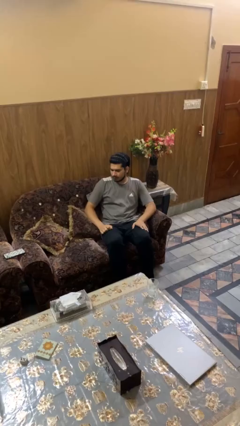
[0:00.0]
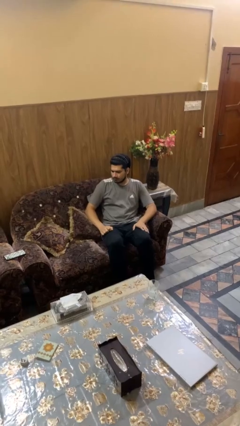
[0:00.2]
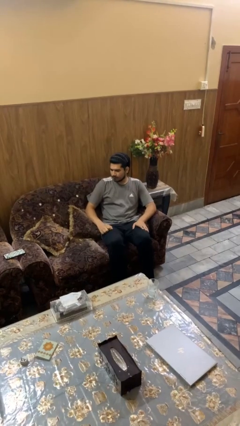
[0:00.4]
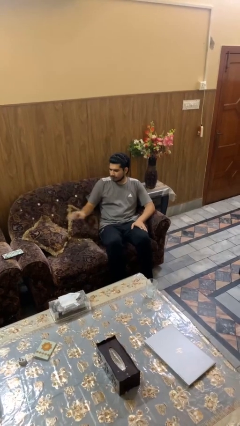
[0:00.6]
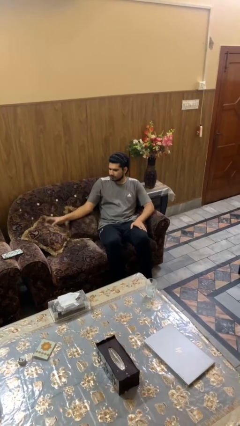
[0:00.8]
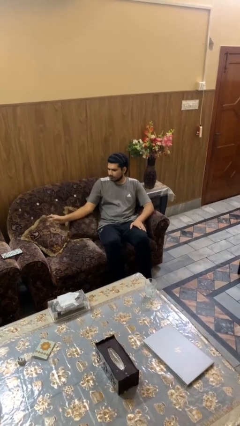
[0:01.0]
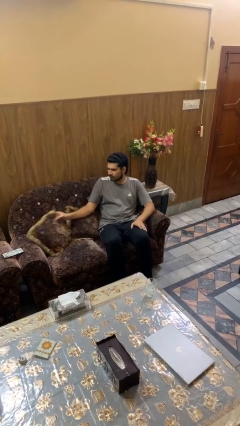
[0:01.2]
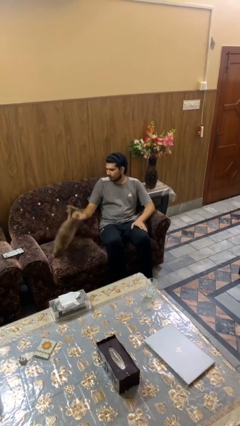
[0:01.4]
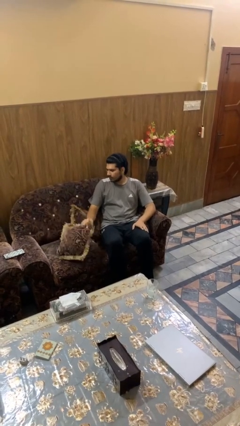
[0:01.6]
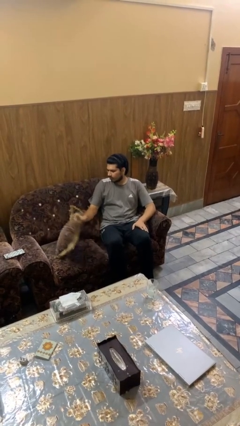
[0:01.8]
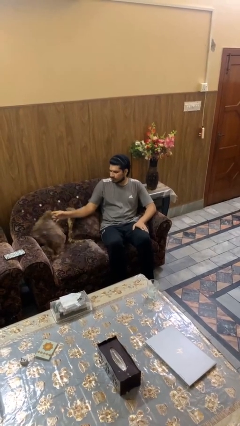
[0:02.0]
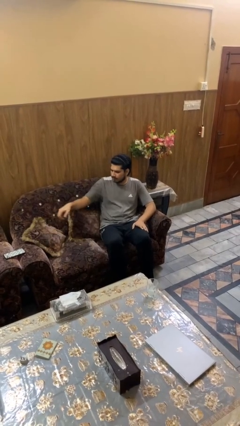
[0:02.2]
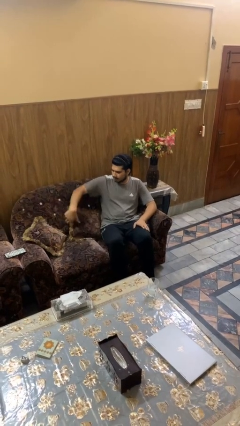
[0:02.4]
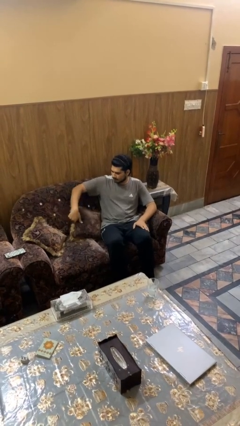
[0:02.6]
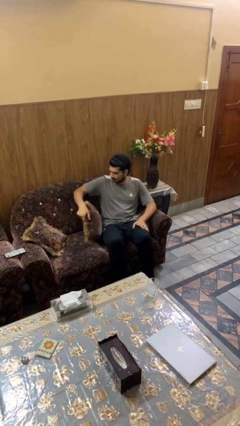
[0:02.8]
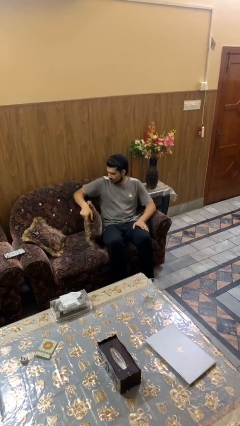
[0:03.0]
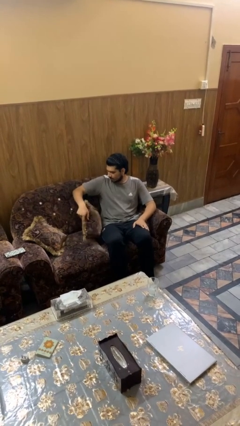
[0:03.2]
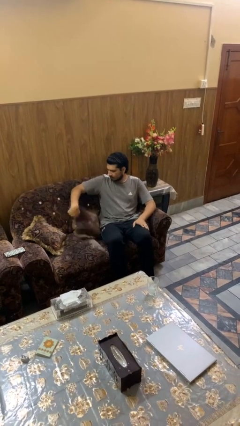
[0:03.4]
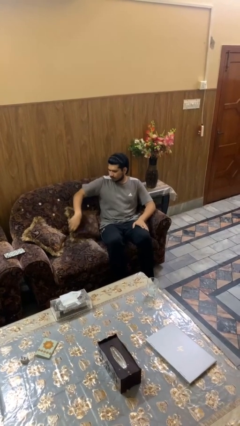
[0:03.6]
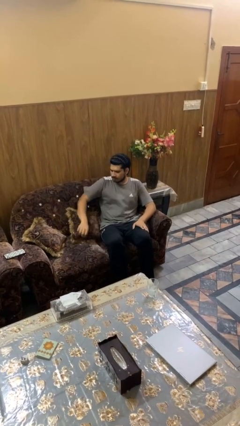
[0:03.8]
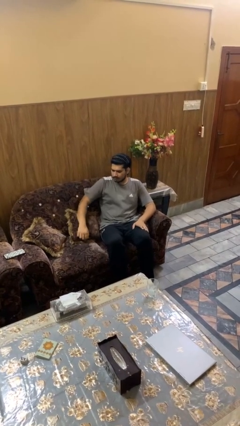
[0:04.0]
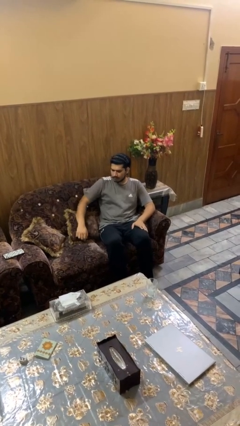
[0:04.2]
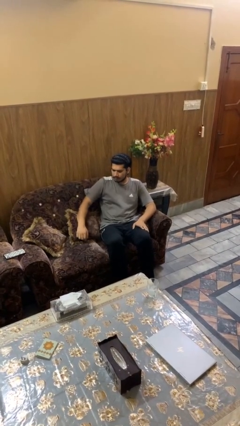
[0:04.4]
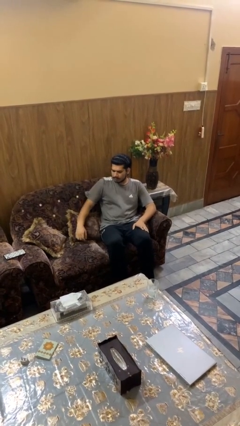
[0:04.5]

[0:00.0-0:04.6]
person searches in couch

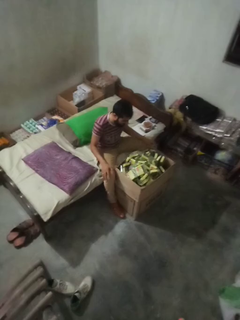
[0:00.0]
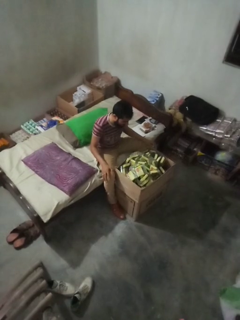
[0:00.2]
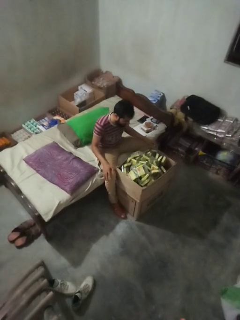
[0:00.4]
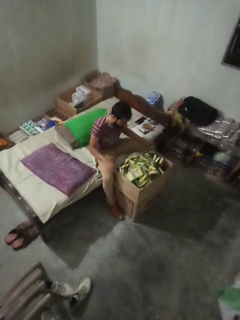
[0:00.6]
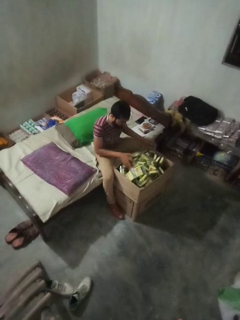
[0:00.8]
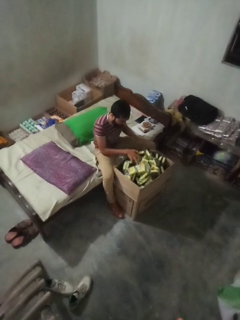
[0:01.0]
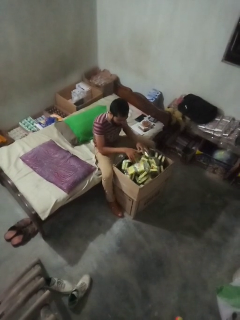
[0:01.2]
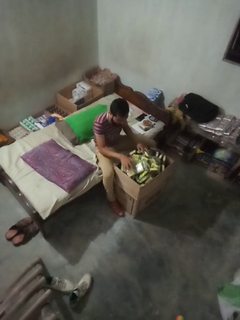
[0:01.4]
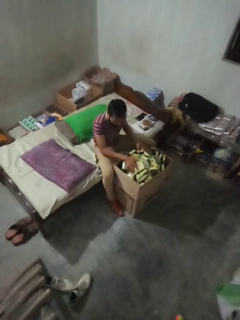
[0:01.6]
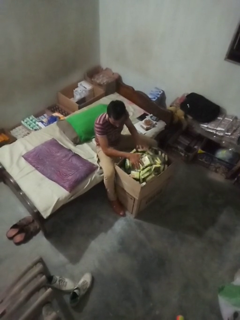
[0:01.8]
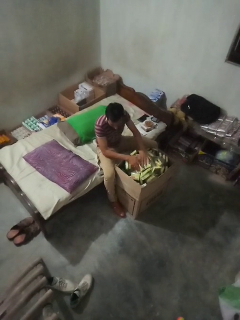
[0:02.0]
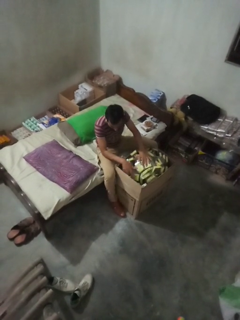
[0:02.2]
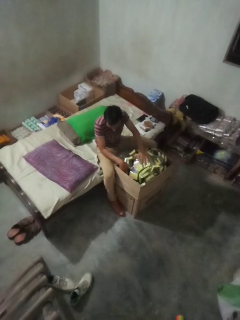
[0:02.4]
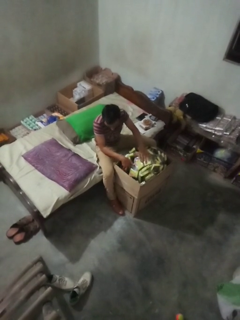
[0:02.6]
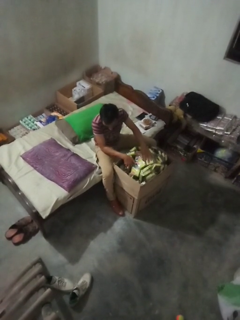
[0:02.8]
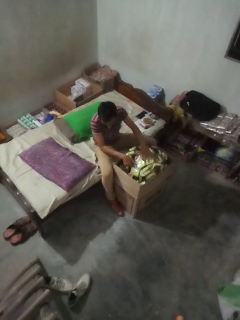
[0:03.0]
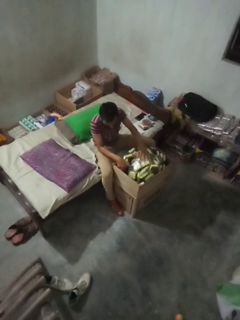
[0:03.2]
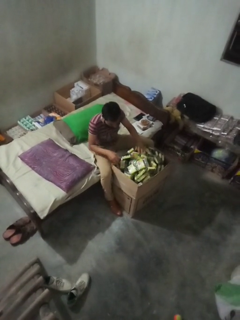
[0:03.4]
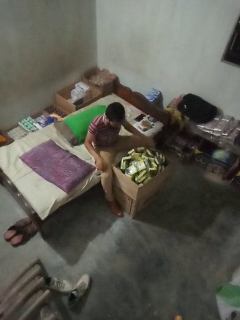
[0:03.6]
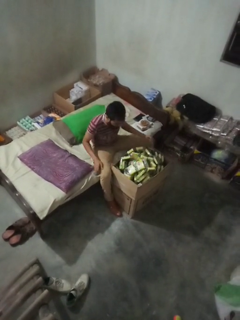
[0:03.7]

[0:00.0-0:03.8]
person searches in box

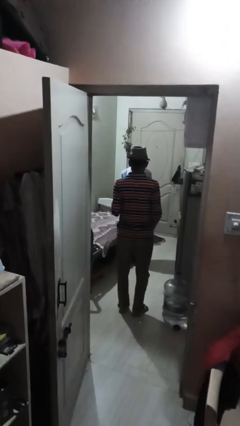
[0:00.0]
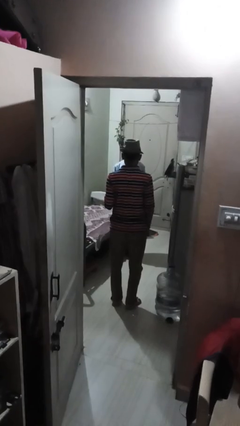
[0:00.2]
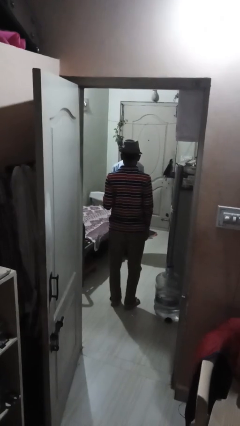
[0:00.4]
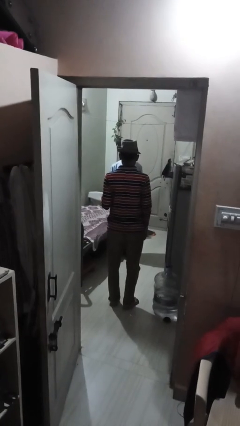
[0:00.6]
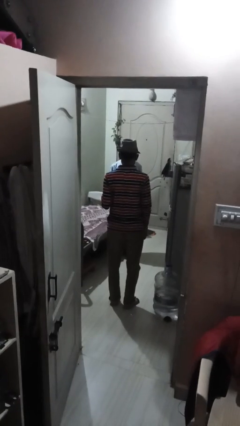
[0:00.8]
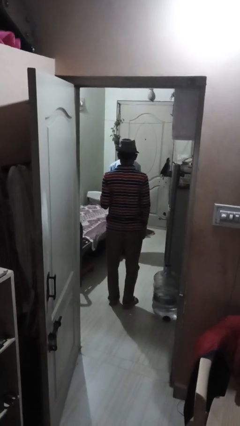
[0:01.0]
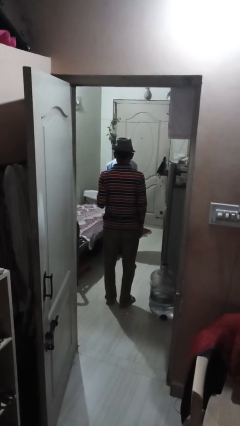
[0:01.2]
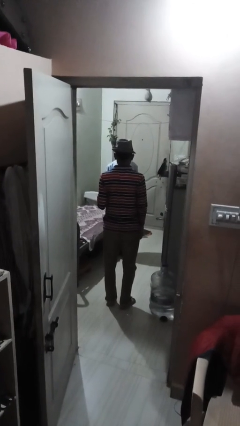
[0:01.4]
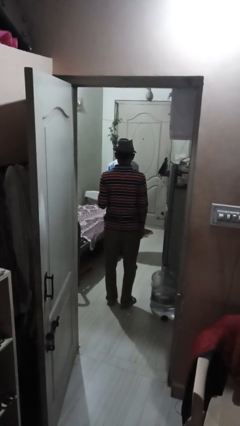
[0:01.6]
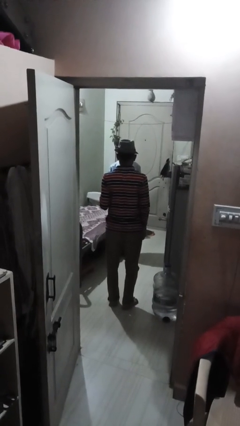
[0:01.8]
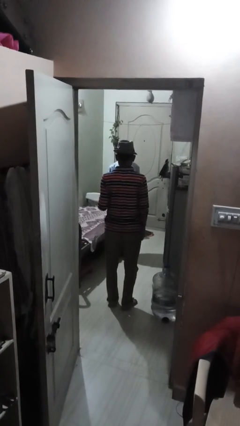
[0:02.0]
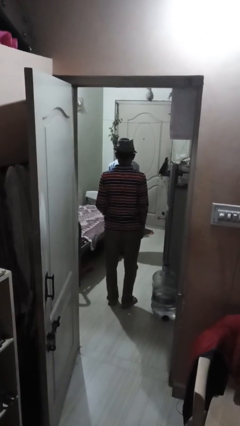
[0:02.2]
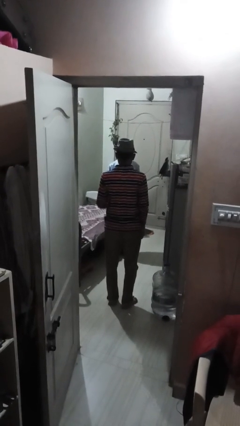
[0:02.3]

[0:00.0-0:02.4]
person throws object to person

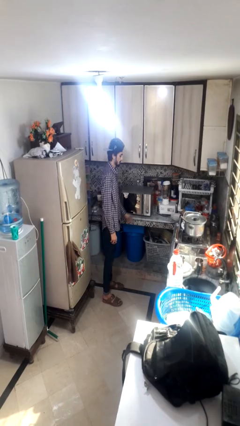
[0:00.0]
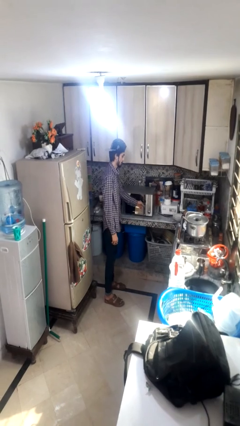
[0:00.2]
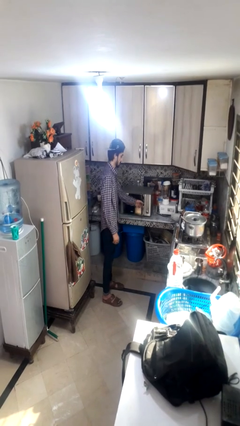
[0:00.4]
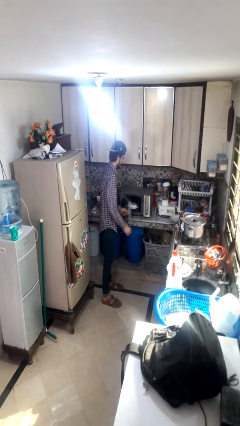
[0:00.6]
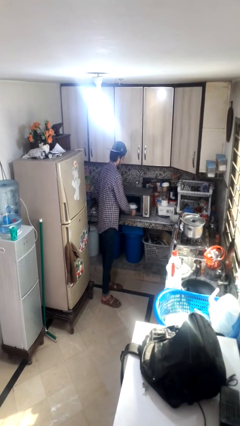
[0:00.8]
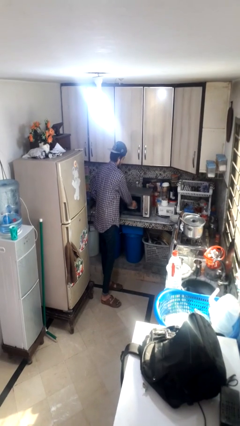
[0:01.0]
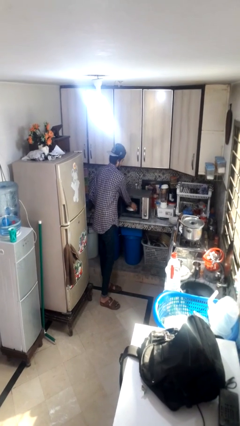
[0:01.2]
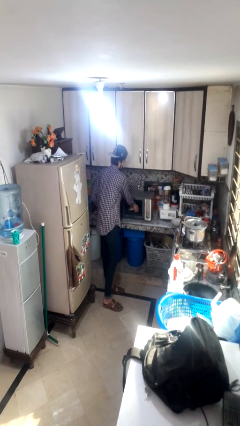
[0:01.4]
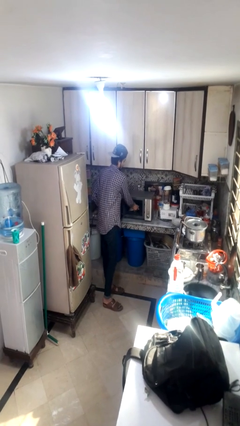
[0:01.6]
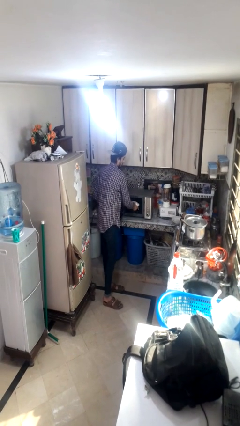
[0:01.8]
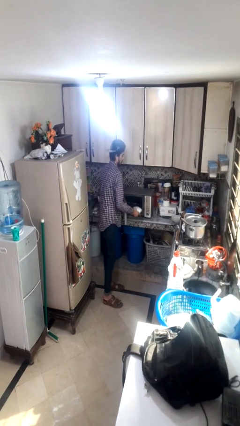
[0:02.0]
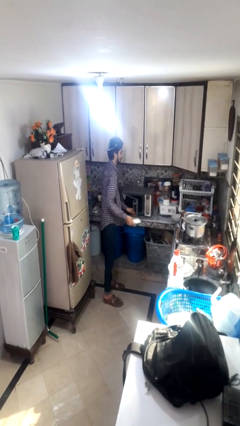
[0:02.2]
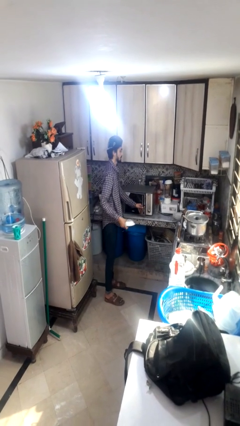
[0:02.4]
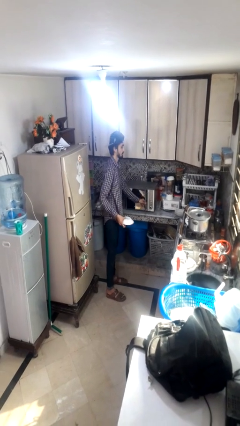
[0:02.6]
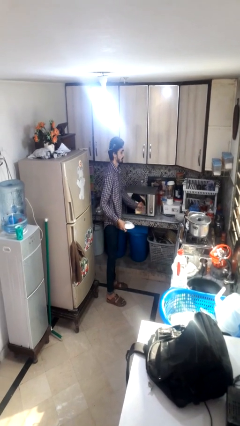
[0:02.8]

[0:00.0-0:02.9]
person takes object from microwave

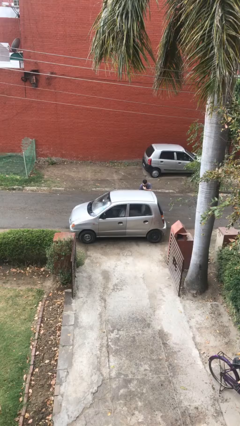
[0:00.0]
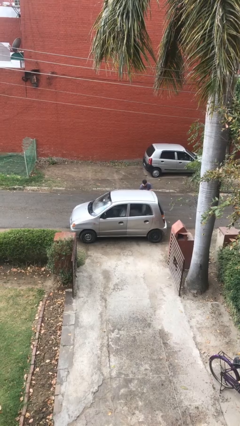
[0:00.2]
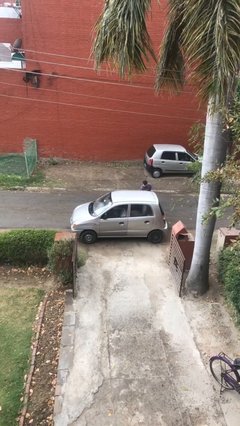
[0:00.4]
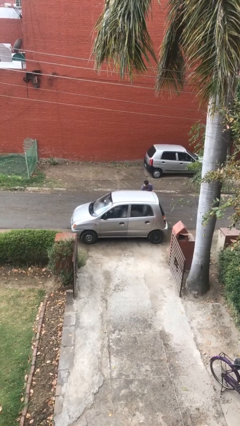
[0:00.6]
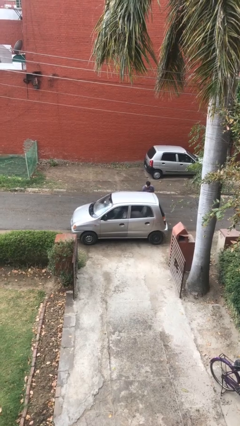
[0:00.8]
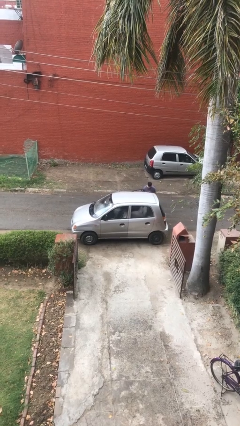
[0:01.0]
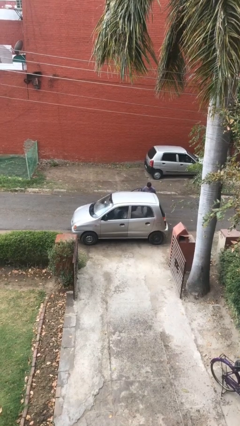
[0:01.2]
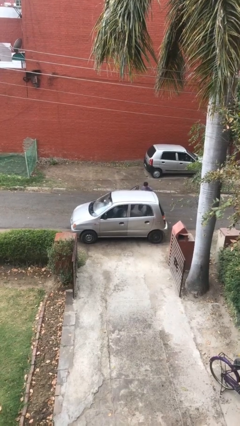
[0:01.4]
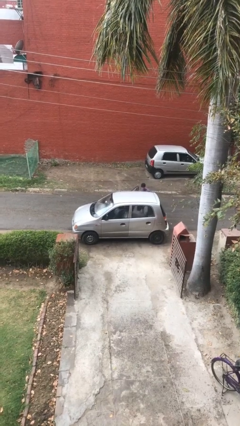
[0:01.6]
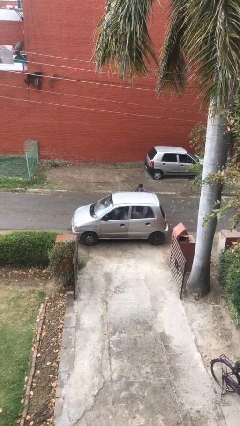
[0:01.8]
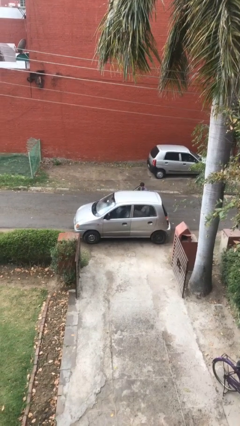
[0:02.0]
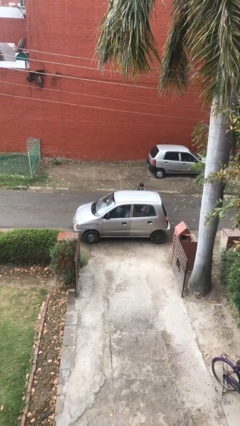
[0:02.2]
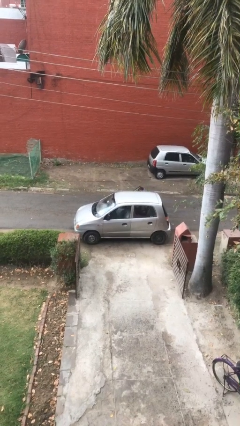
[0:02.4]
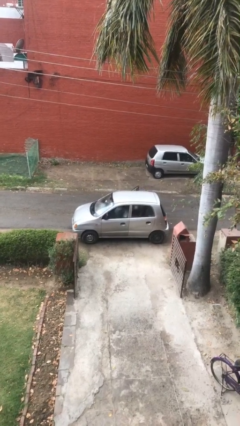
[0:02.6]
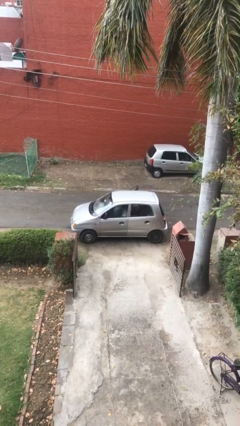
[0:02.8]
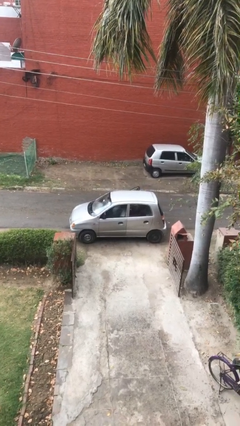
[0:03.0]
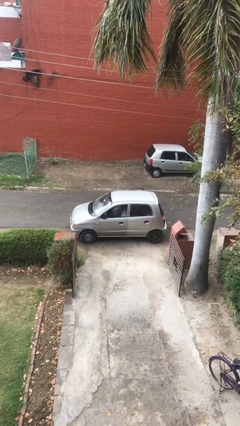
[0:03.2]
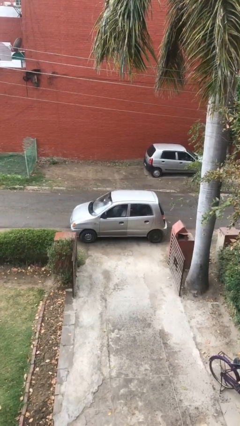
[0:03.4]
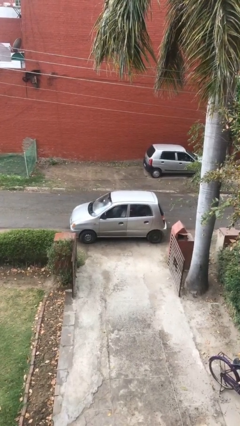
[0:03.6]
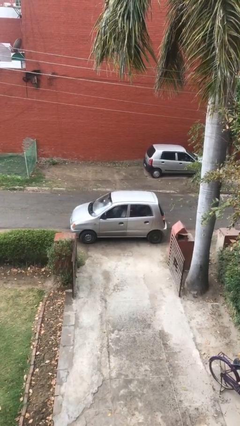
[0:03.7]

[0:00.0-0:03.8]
car picks up person

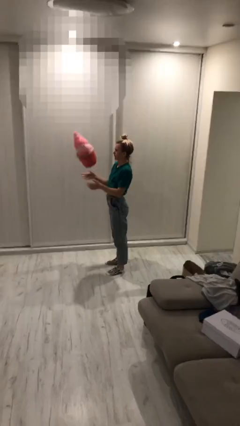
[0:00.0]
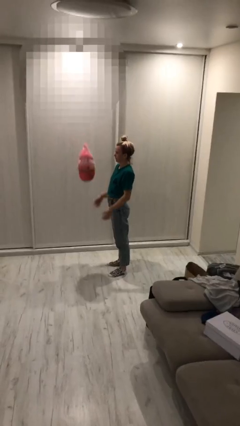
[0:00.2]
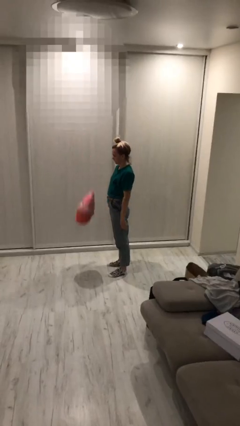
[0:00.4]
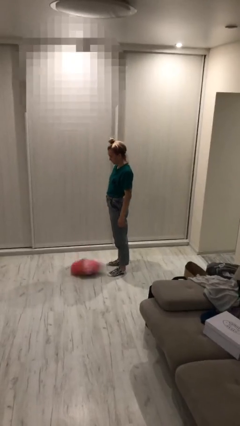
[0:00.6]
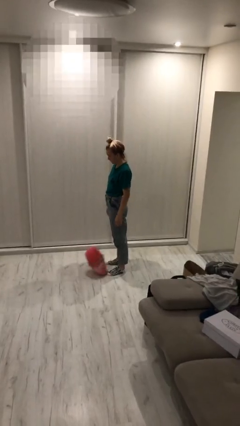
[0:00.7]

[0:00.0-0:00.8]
person throws object into air

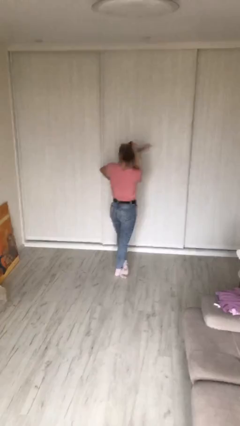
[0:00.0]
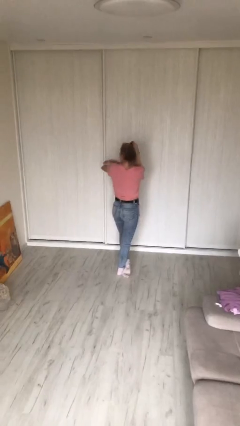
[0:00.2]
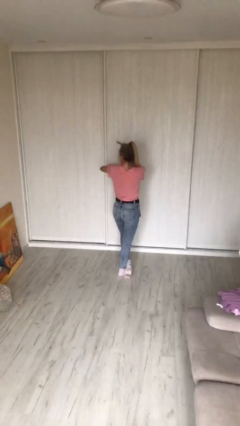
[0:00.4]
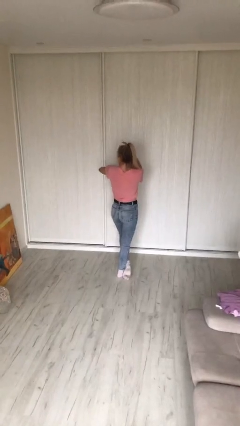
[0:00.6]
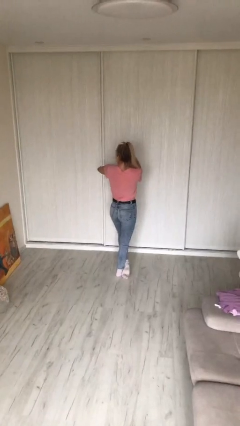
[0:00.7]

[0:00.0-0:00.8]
person swats bug
